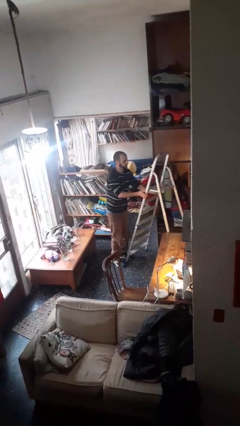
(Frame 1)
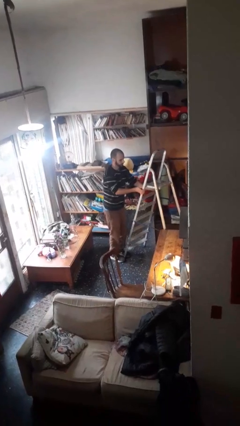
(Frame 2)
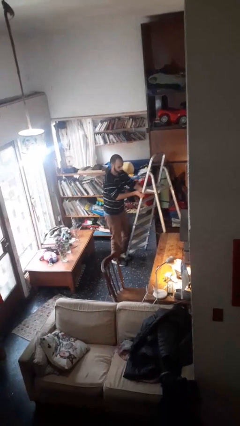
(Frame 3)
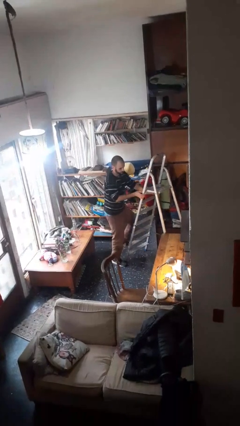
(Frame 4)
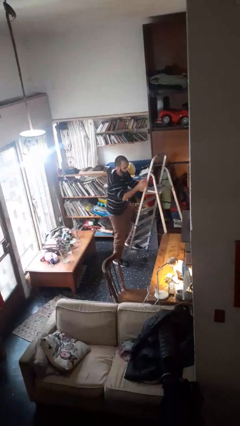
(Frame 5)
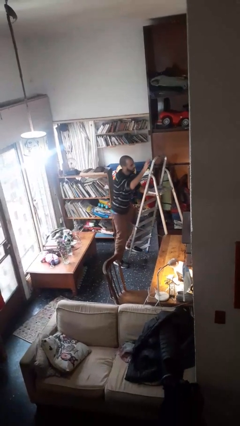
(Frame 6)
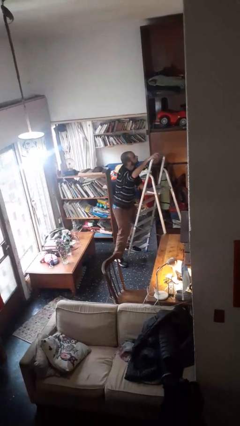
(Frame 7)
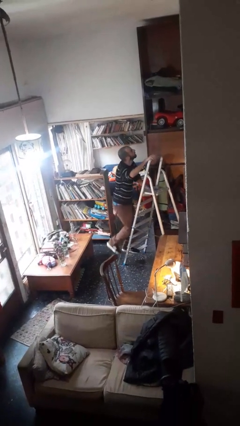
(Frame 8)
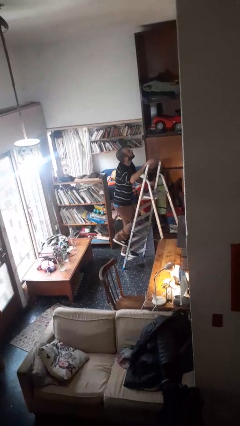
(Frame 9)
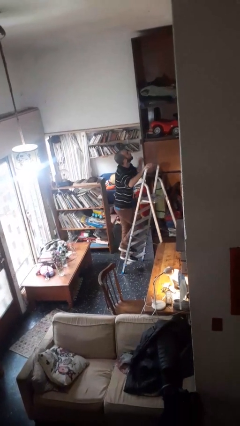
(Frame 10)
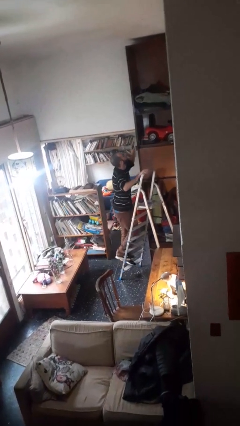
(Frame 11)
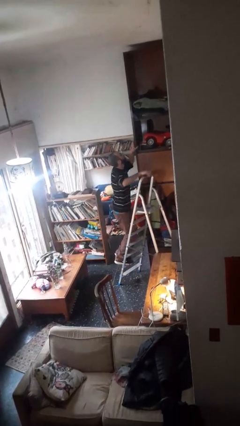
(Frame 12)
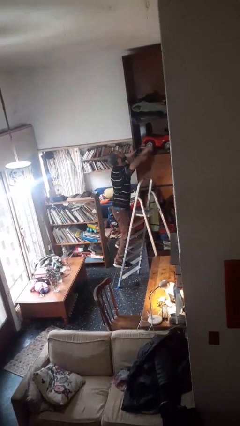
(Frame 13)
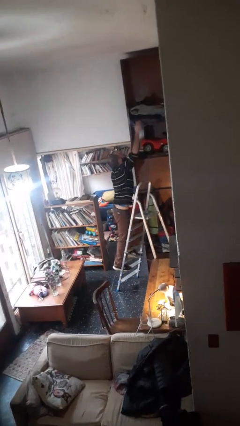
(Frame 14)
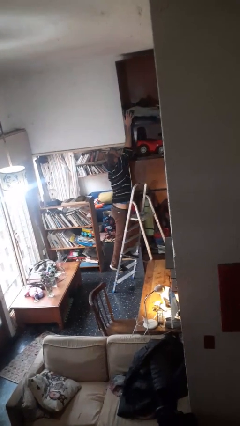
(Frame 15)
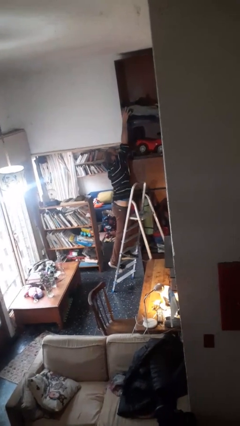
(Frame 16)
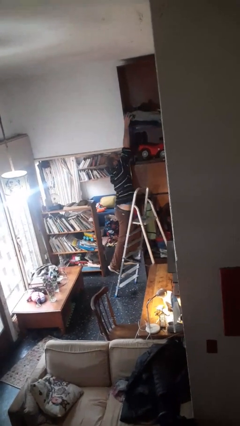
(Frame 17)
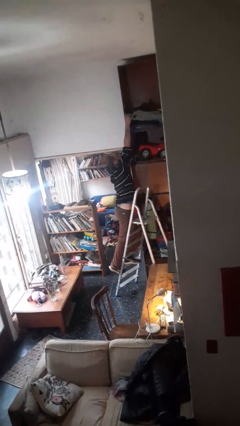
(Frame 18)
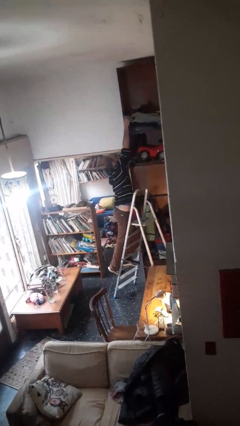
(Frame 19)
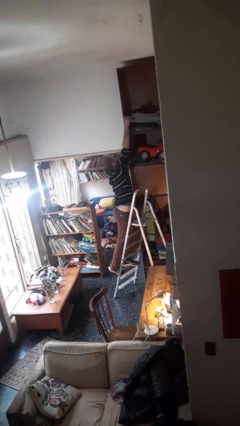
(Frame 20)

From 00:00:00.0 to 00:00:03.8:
person climbs up ladder

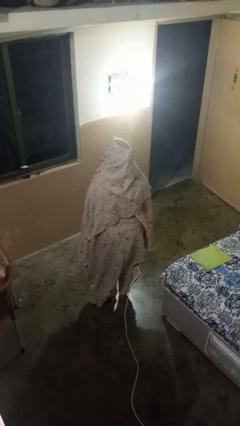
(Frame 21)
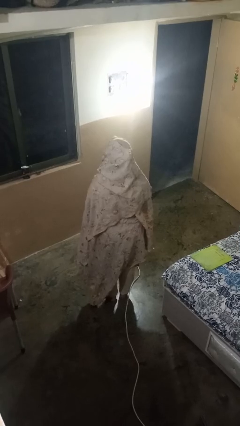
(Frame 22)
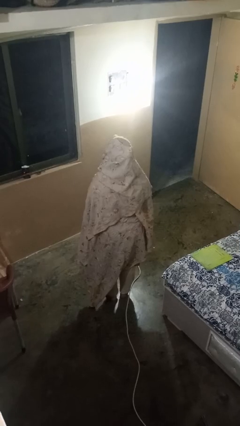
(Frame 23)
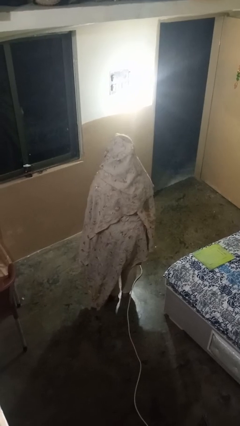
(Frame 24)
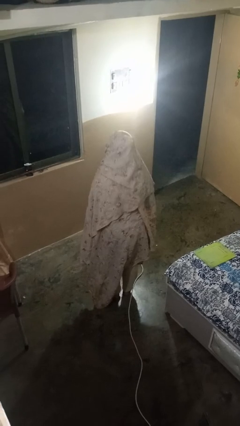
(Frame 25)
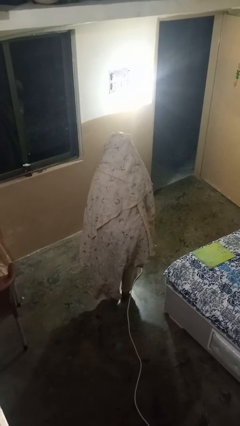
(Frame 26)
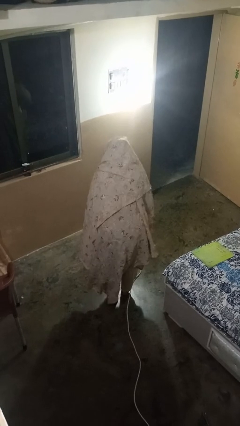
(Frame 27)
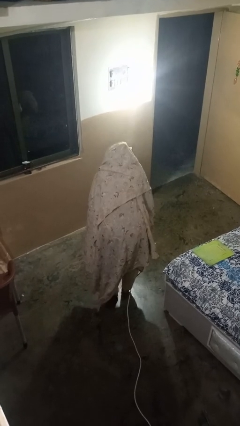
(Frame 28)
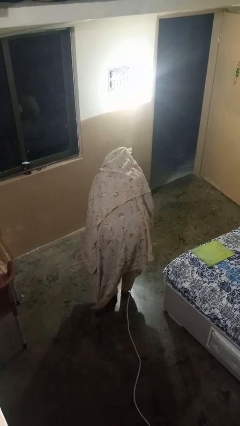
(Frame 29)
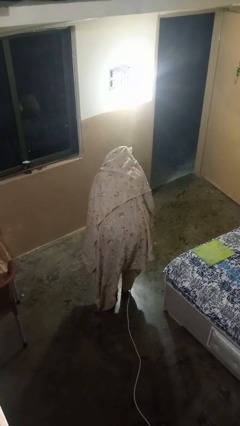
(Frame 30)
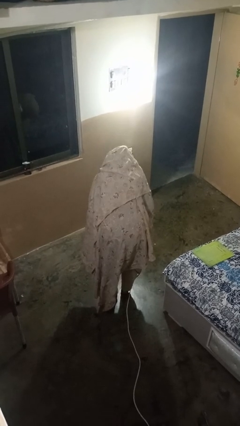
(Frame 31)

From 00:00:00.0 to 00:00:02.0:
person bows

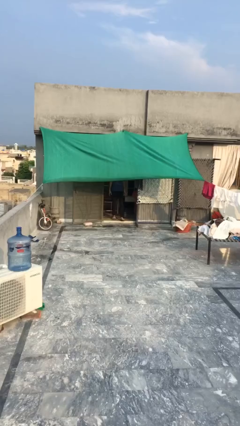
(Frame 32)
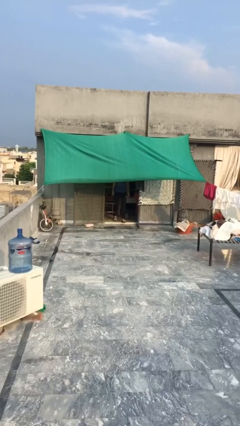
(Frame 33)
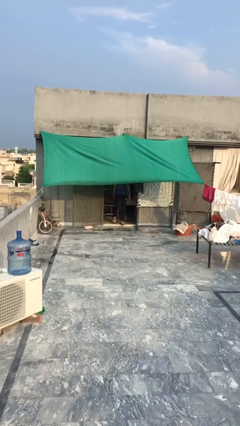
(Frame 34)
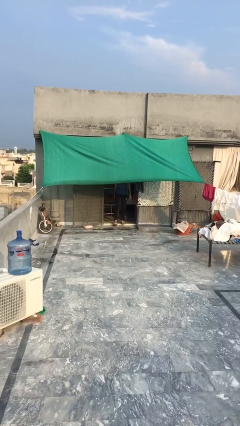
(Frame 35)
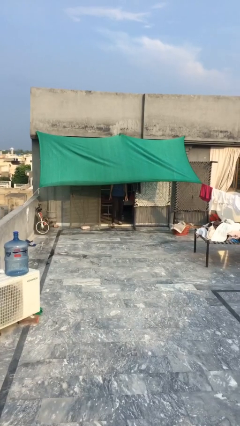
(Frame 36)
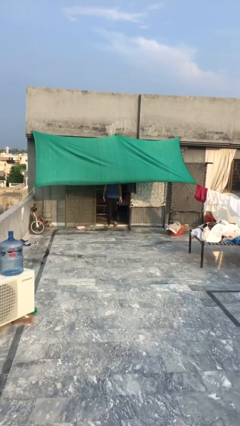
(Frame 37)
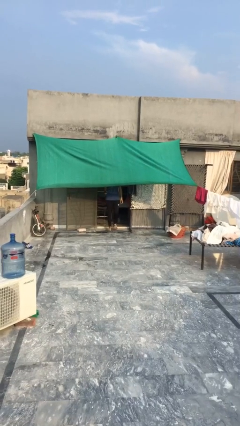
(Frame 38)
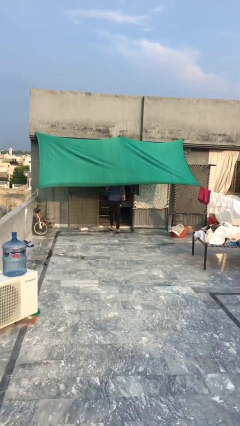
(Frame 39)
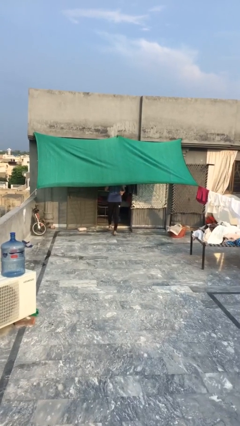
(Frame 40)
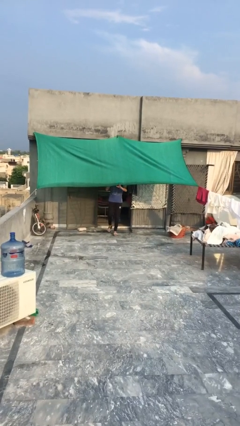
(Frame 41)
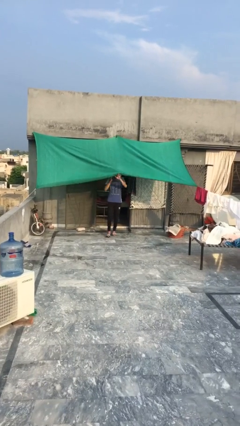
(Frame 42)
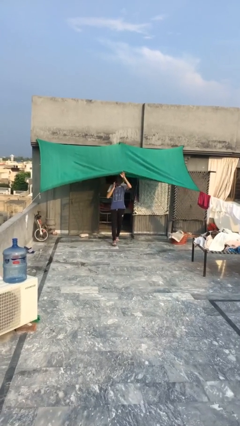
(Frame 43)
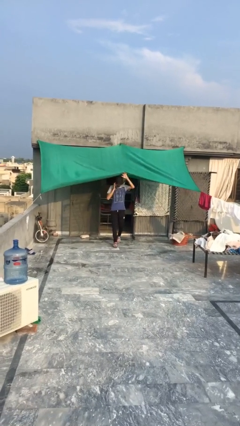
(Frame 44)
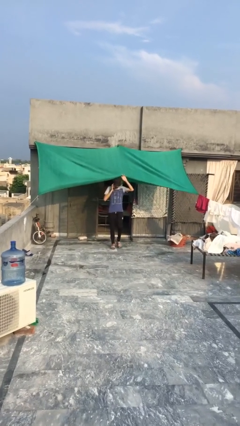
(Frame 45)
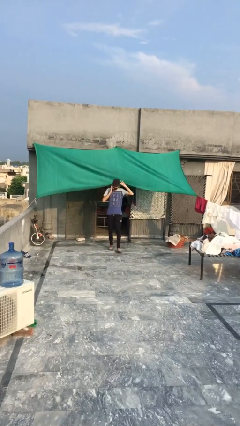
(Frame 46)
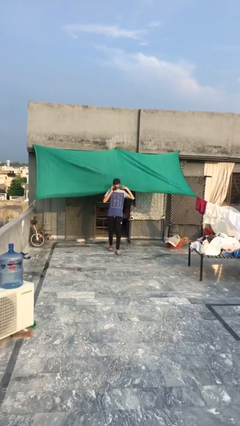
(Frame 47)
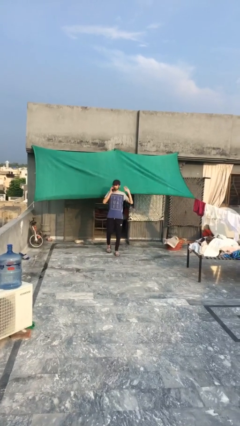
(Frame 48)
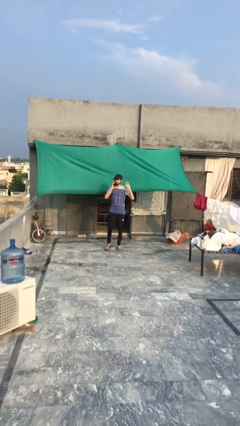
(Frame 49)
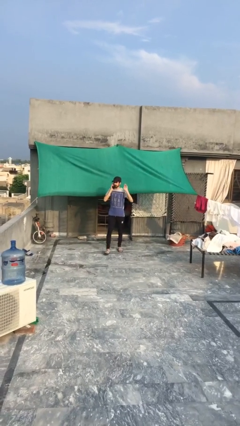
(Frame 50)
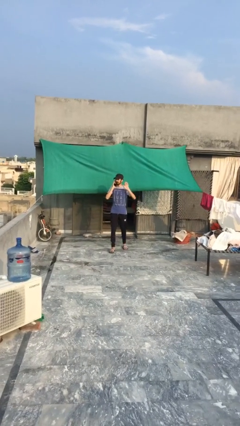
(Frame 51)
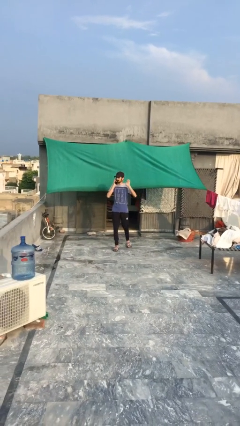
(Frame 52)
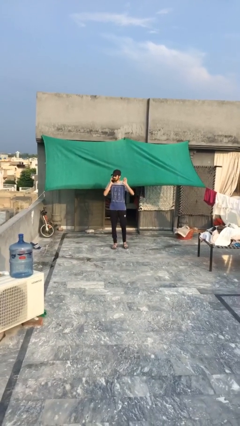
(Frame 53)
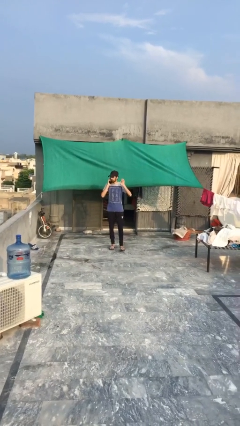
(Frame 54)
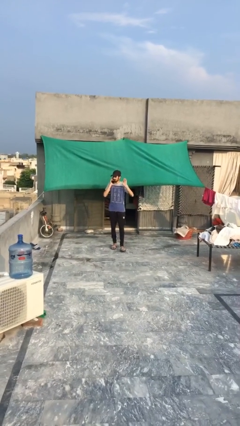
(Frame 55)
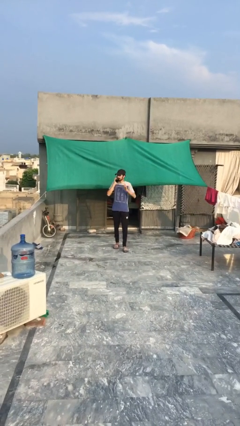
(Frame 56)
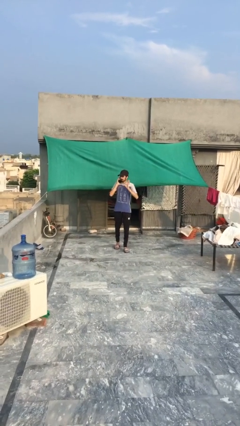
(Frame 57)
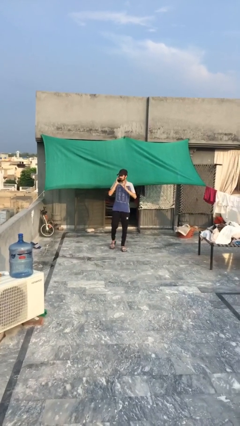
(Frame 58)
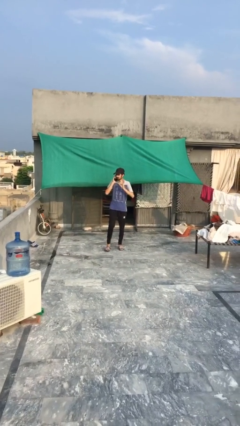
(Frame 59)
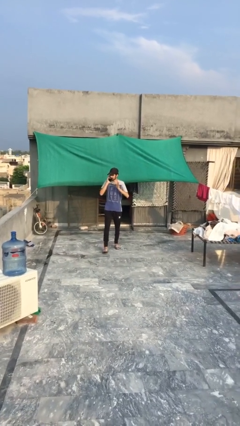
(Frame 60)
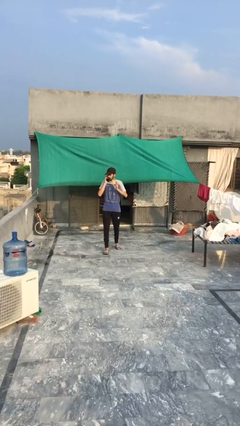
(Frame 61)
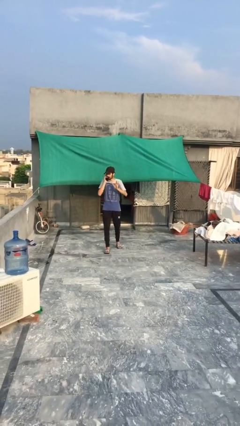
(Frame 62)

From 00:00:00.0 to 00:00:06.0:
person enters scene through structure

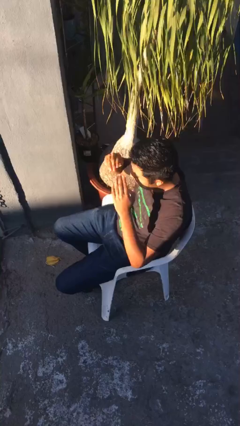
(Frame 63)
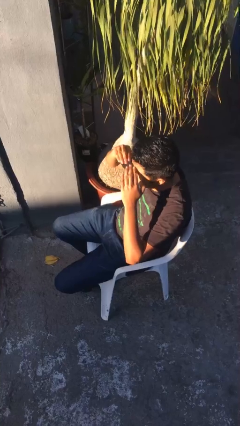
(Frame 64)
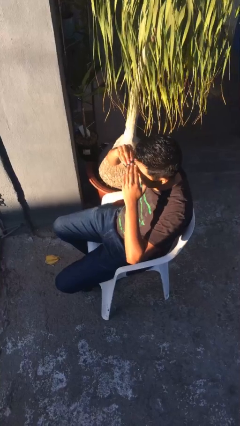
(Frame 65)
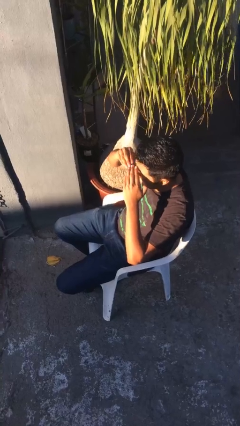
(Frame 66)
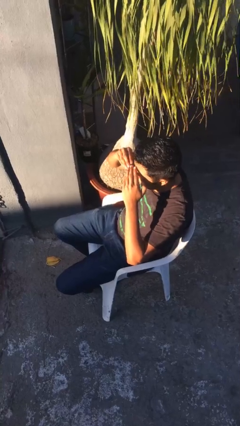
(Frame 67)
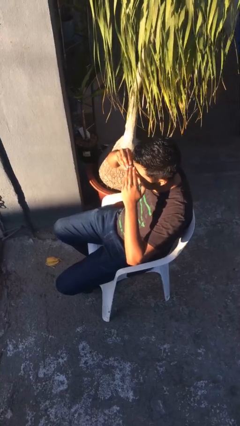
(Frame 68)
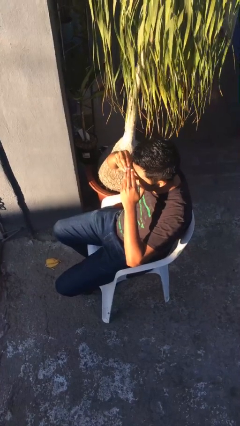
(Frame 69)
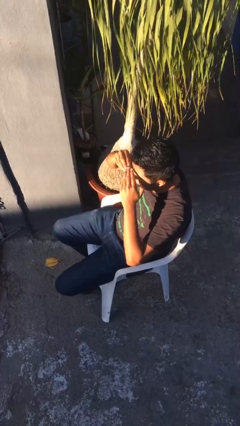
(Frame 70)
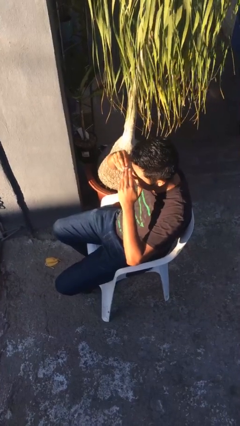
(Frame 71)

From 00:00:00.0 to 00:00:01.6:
person shades eyes

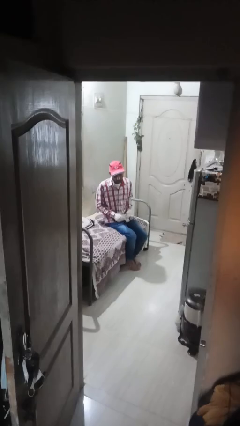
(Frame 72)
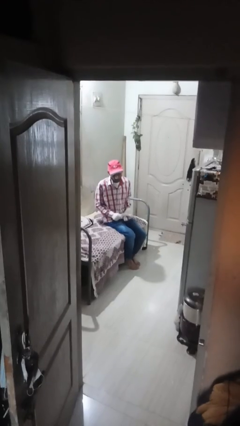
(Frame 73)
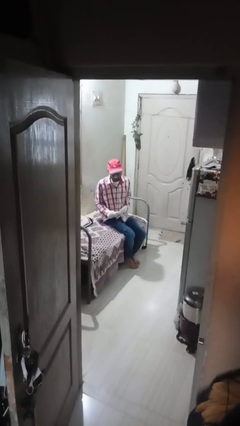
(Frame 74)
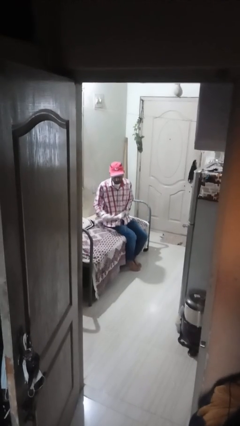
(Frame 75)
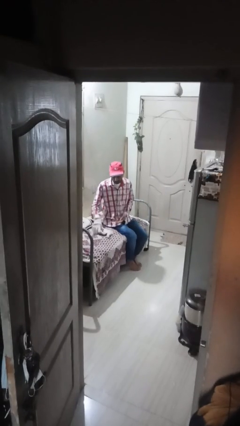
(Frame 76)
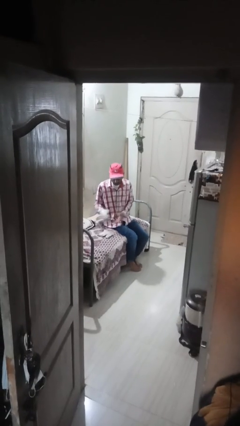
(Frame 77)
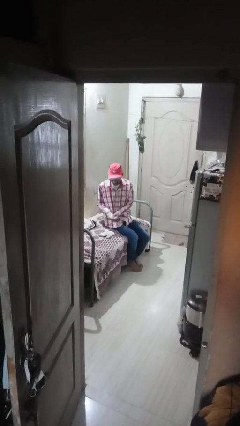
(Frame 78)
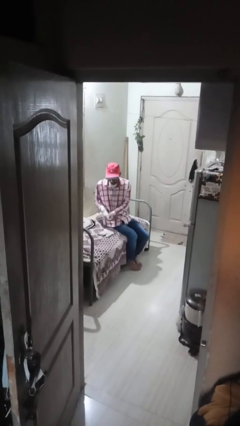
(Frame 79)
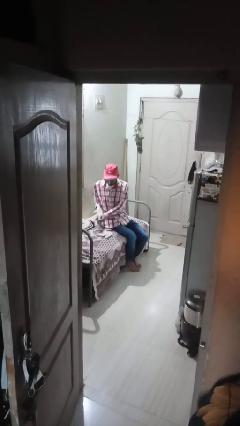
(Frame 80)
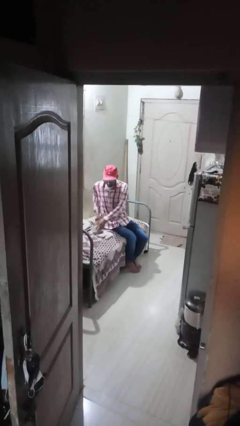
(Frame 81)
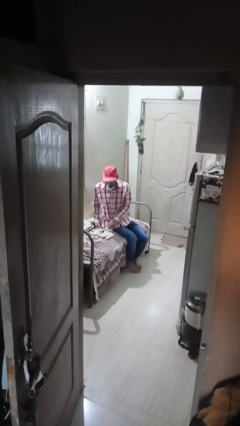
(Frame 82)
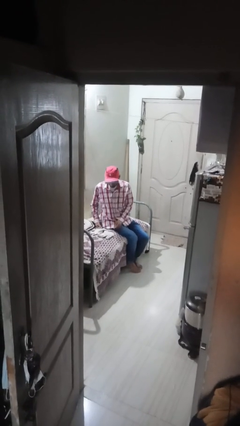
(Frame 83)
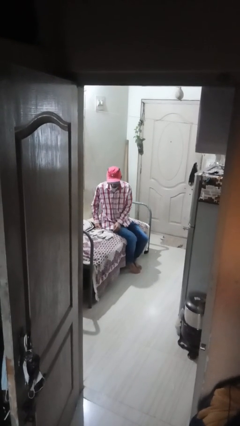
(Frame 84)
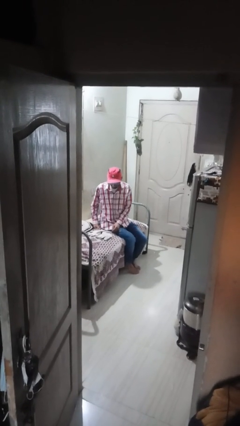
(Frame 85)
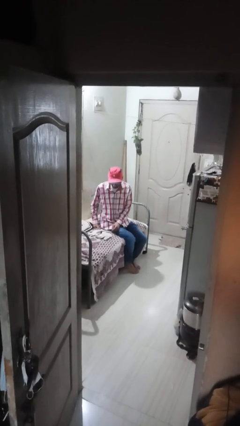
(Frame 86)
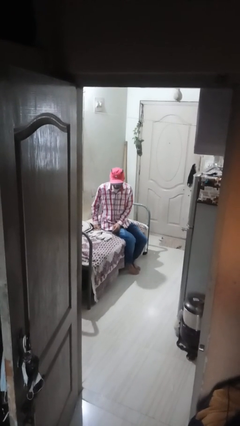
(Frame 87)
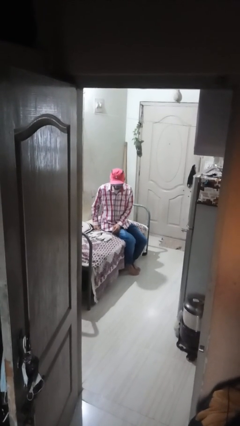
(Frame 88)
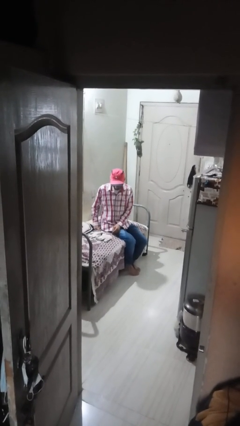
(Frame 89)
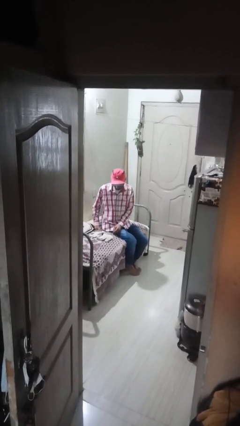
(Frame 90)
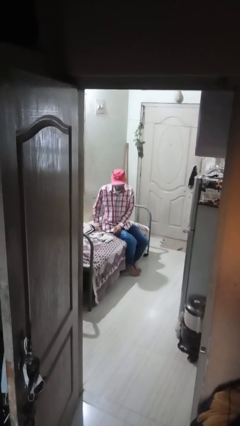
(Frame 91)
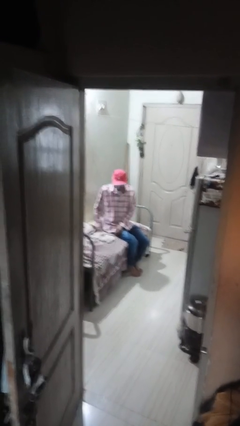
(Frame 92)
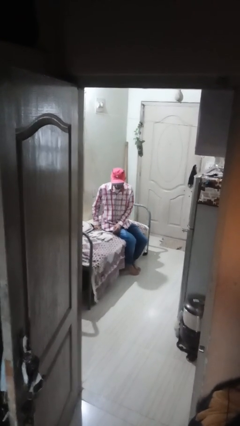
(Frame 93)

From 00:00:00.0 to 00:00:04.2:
person takes off gloves
